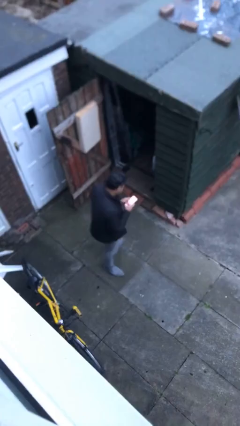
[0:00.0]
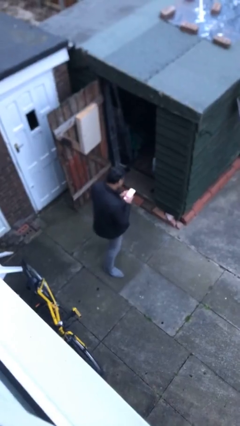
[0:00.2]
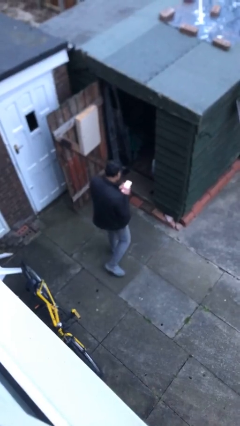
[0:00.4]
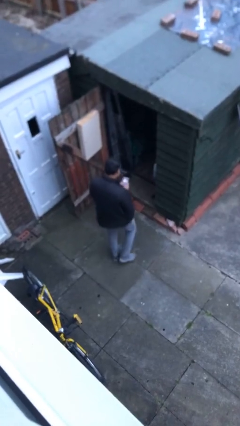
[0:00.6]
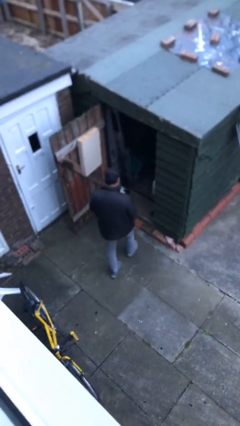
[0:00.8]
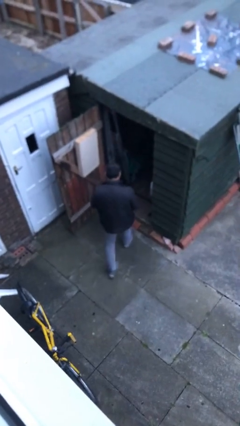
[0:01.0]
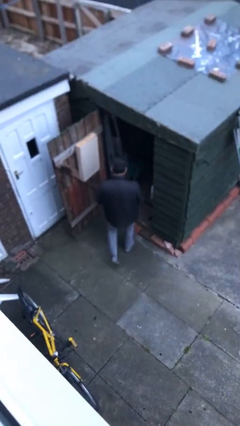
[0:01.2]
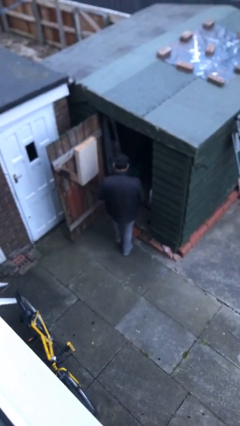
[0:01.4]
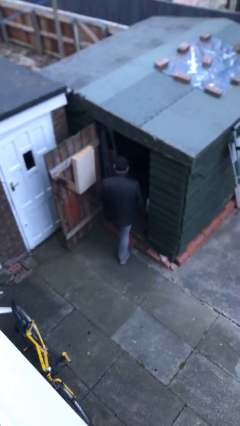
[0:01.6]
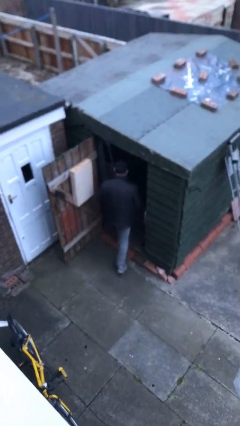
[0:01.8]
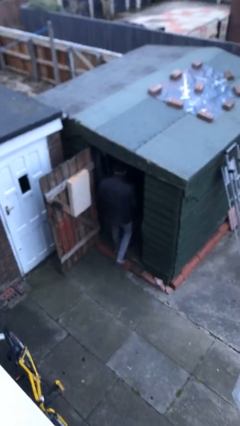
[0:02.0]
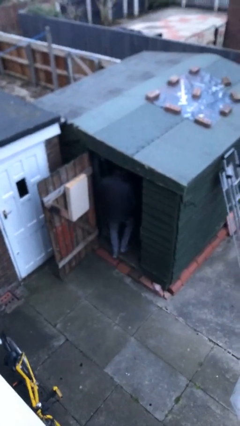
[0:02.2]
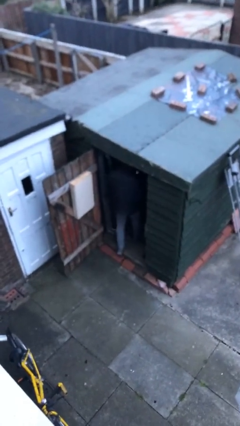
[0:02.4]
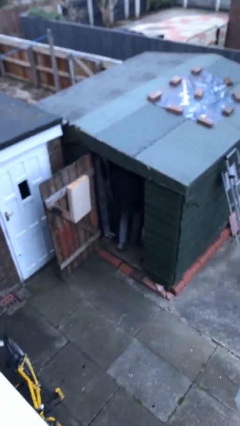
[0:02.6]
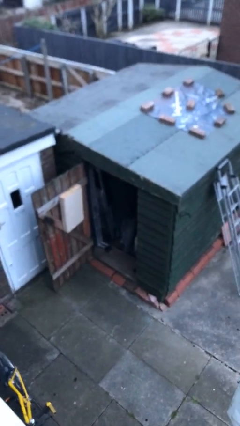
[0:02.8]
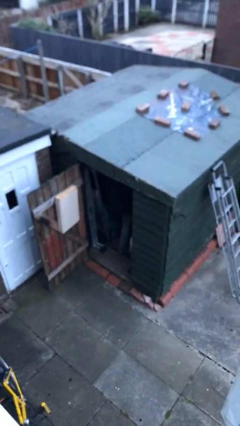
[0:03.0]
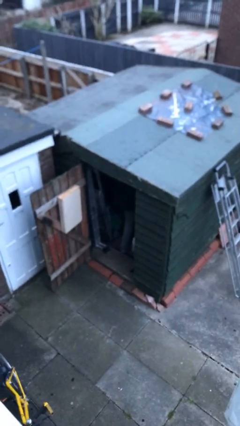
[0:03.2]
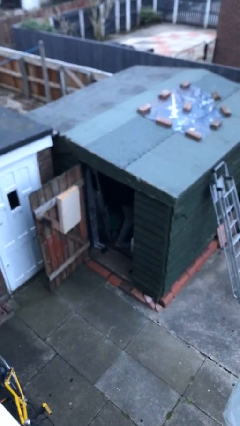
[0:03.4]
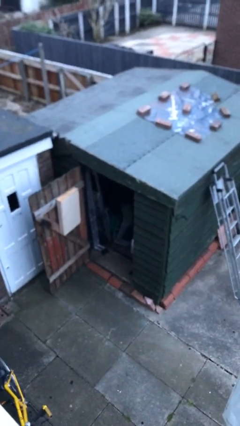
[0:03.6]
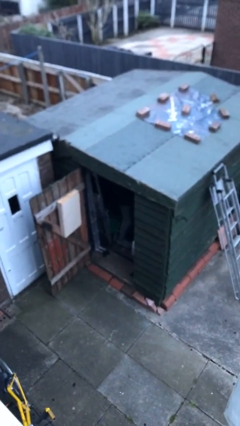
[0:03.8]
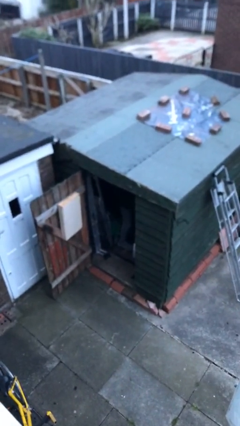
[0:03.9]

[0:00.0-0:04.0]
person exits scene through structure

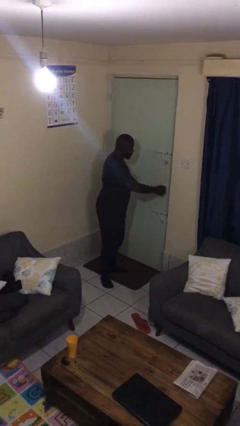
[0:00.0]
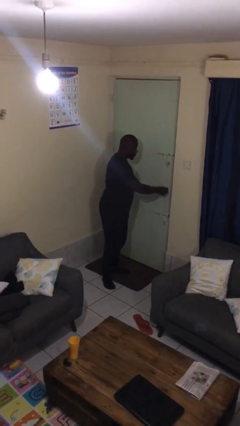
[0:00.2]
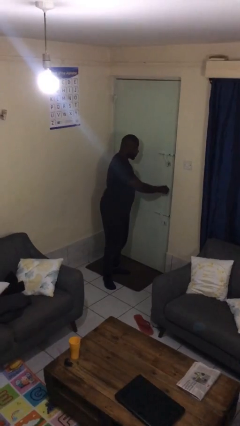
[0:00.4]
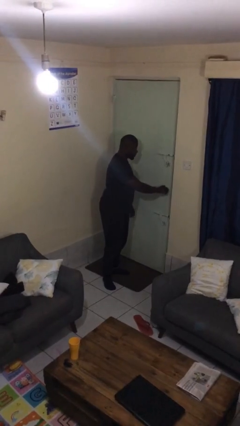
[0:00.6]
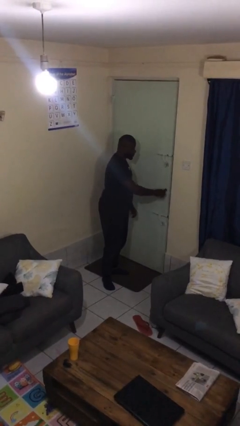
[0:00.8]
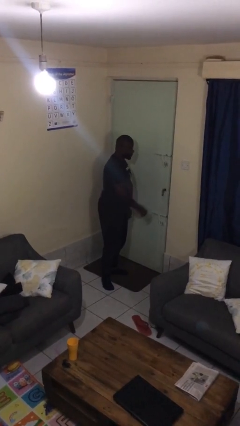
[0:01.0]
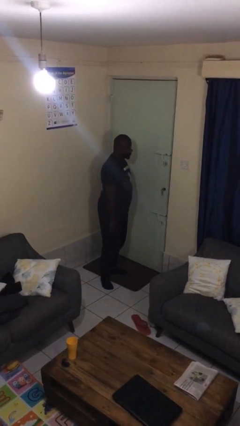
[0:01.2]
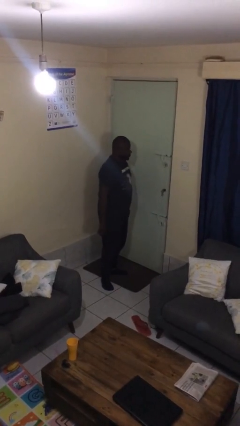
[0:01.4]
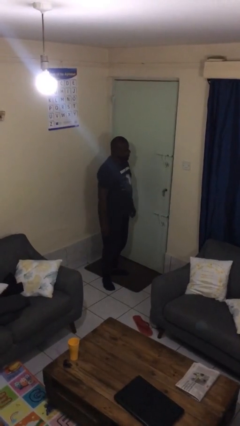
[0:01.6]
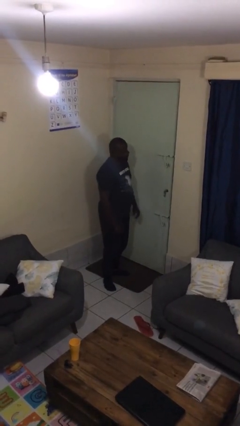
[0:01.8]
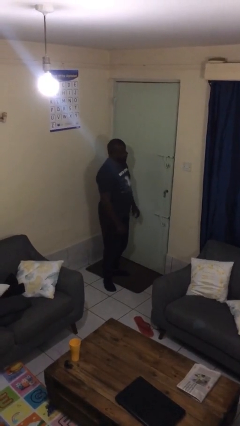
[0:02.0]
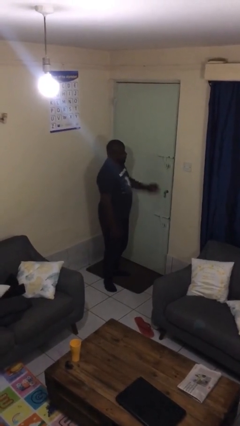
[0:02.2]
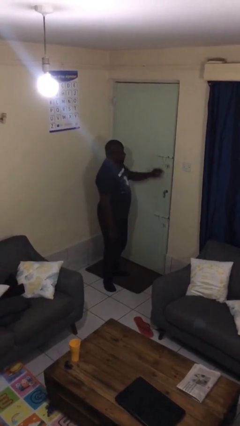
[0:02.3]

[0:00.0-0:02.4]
person unlocks door with keys

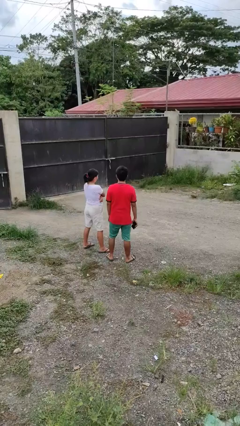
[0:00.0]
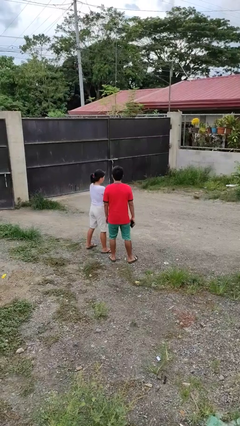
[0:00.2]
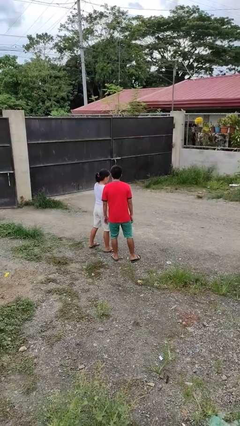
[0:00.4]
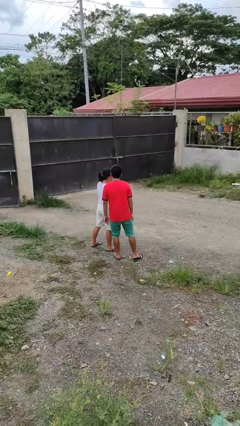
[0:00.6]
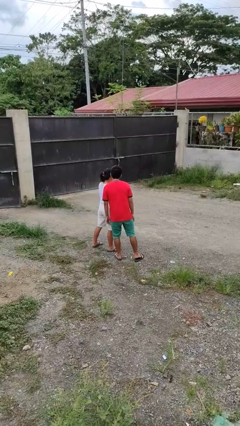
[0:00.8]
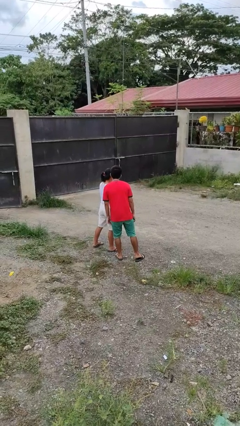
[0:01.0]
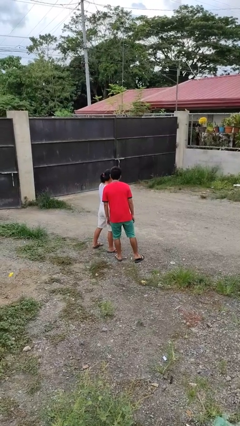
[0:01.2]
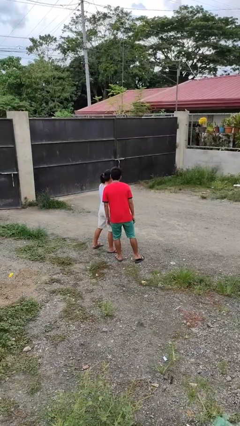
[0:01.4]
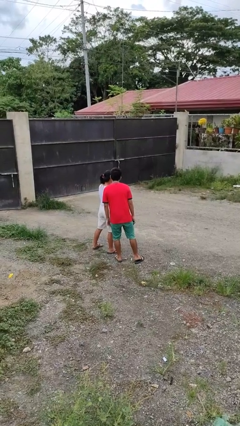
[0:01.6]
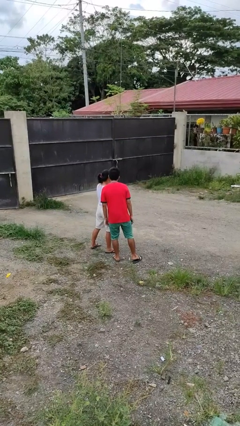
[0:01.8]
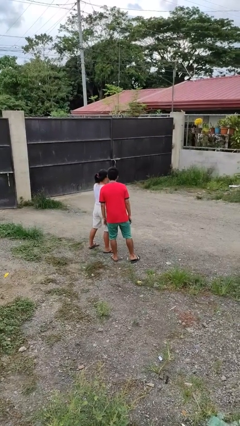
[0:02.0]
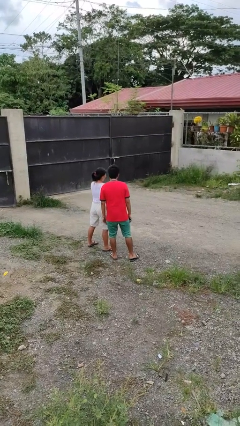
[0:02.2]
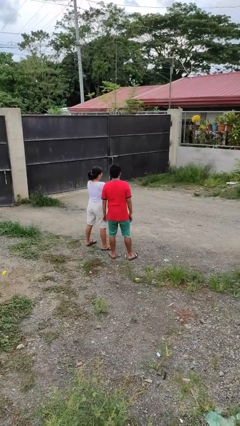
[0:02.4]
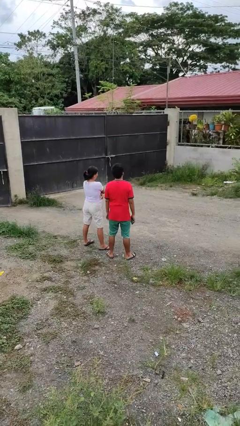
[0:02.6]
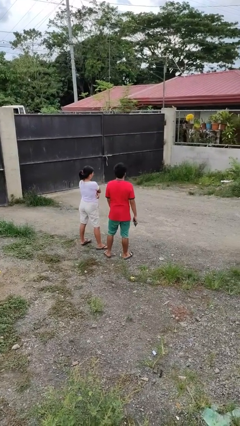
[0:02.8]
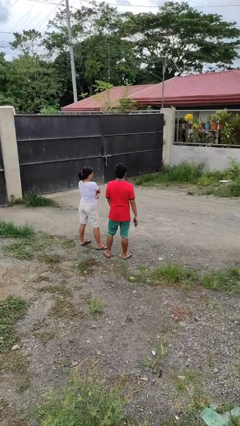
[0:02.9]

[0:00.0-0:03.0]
person kisses cheek of person

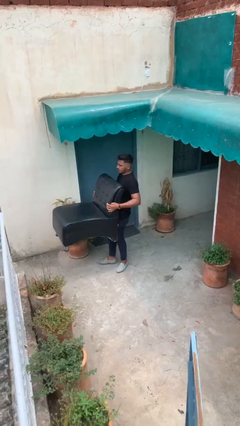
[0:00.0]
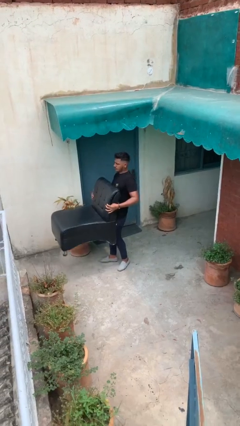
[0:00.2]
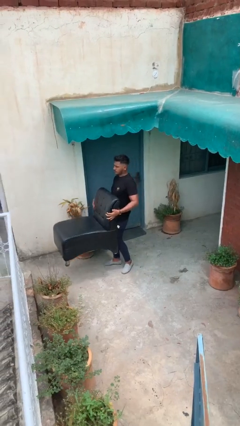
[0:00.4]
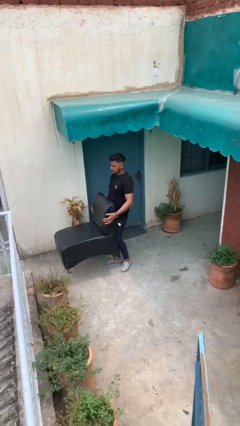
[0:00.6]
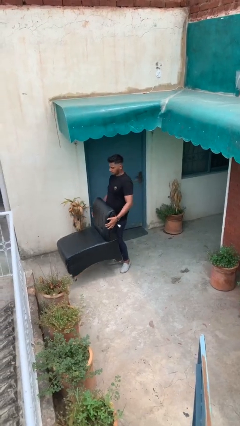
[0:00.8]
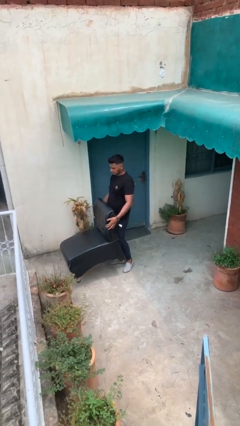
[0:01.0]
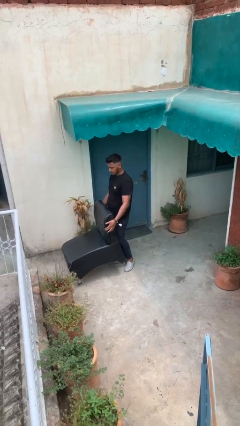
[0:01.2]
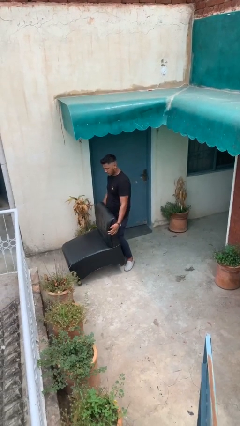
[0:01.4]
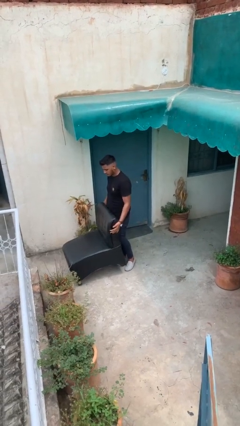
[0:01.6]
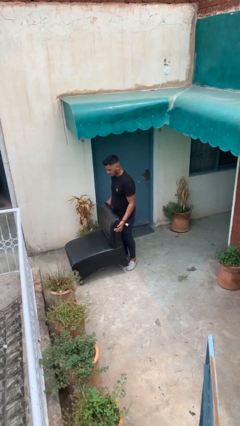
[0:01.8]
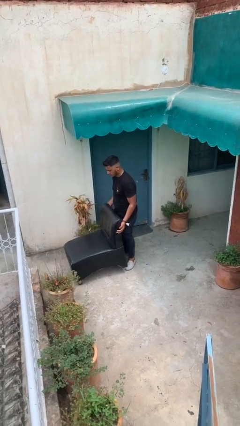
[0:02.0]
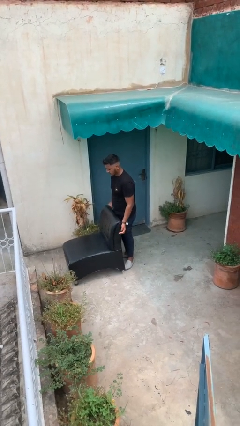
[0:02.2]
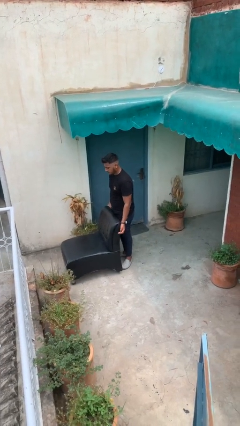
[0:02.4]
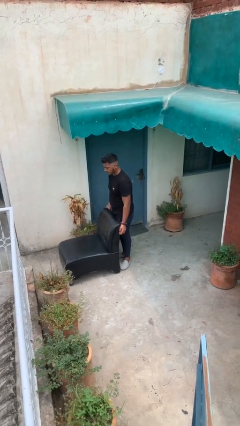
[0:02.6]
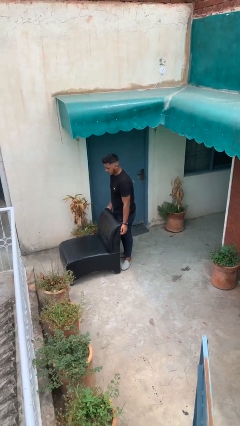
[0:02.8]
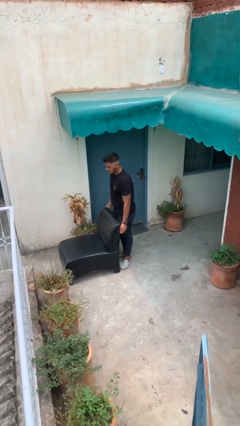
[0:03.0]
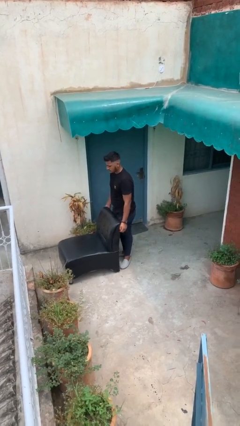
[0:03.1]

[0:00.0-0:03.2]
person puts down object on floor

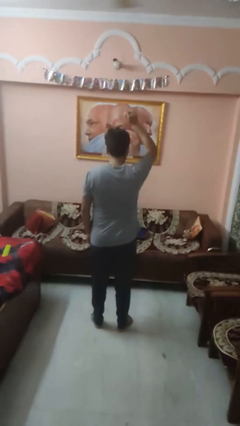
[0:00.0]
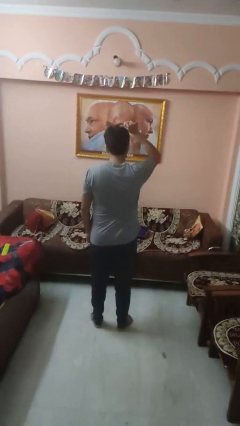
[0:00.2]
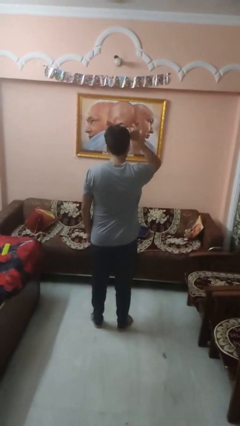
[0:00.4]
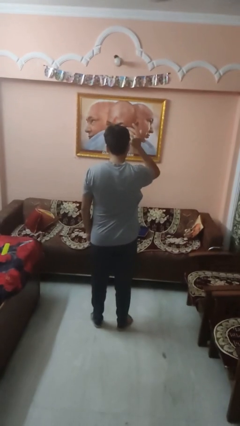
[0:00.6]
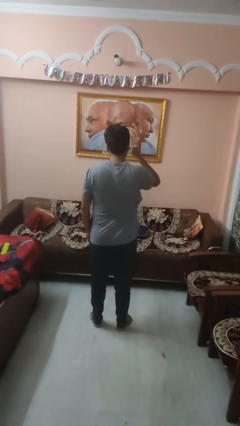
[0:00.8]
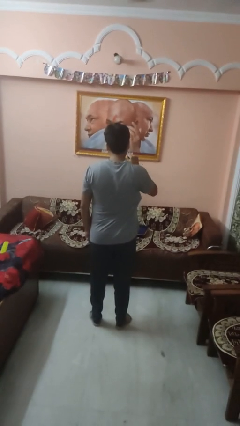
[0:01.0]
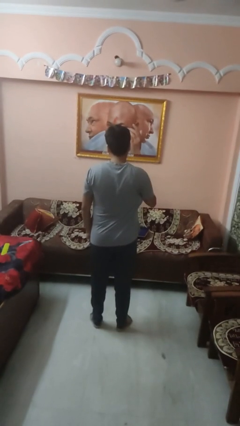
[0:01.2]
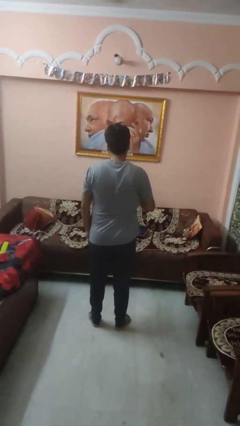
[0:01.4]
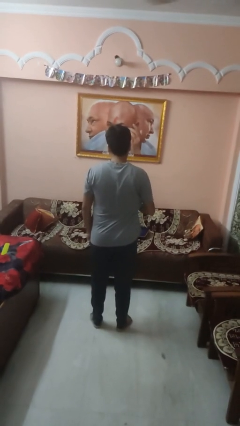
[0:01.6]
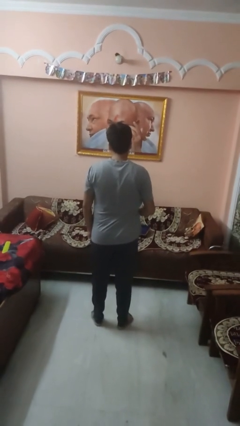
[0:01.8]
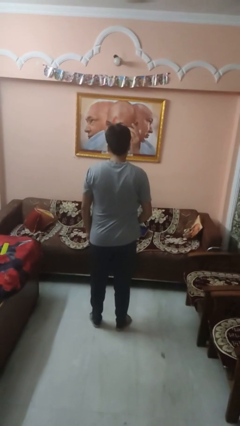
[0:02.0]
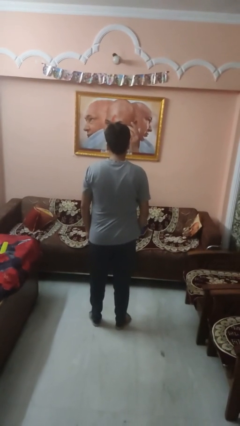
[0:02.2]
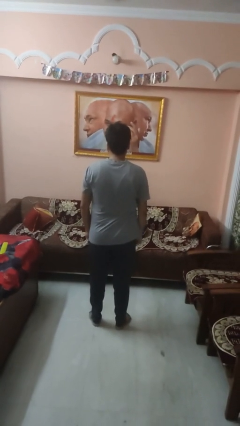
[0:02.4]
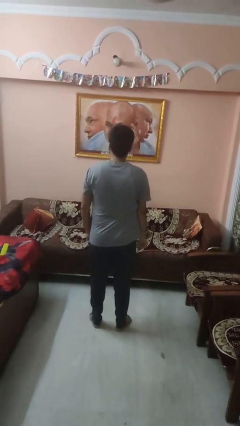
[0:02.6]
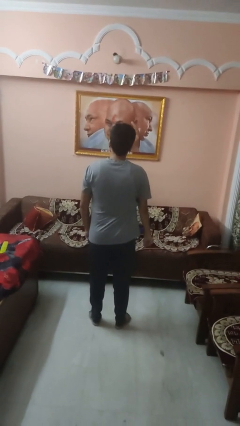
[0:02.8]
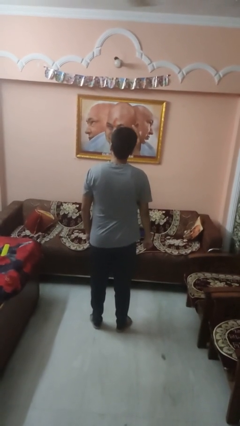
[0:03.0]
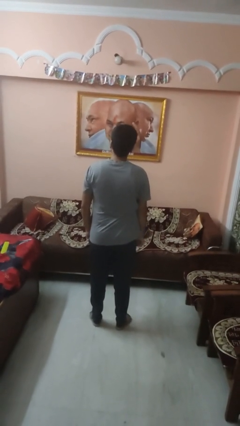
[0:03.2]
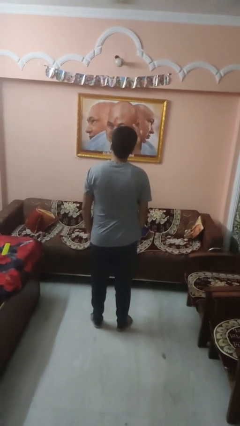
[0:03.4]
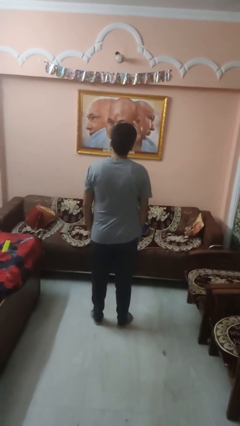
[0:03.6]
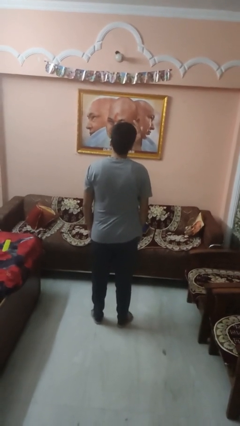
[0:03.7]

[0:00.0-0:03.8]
person gestures lower hand

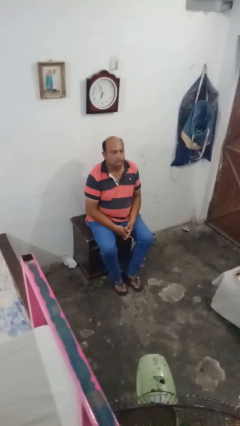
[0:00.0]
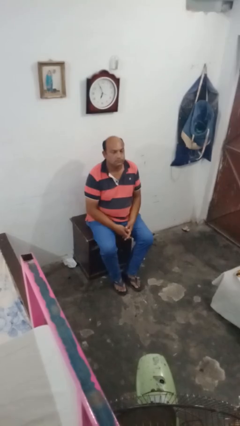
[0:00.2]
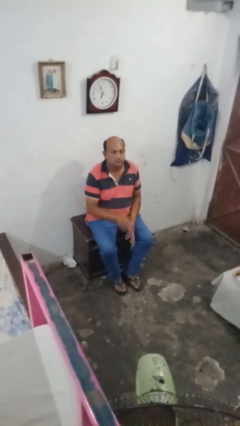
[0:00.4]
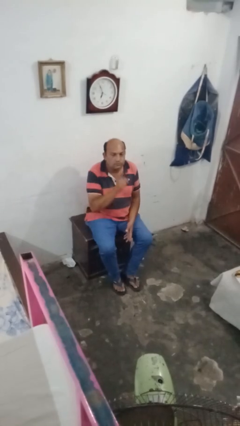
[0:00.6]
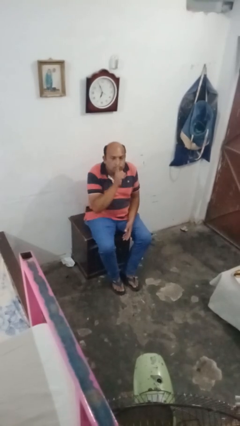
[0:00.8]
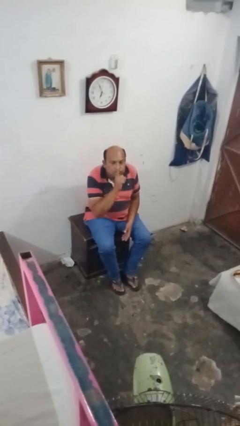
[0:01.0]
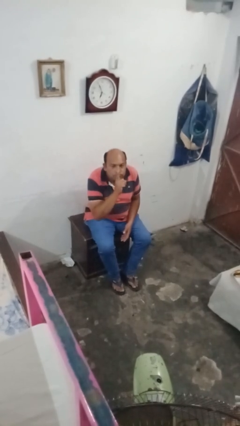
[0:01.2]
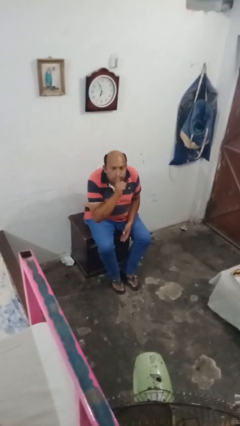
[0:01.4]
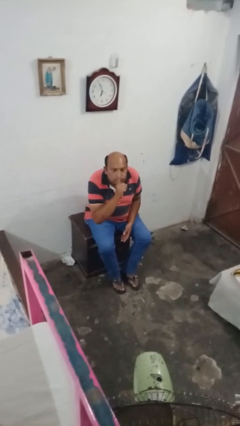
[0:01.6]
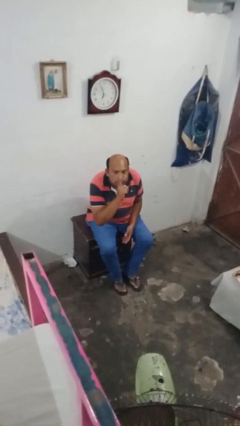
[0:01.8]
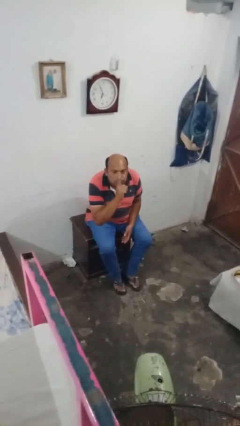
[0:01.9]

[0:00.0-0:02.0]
person gestures blow kiss
